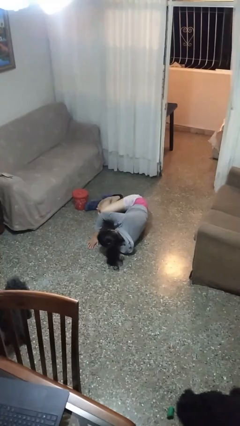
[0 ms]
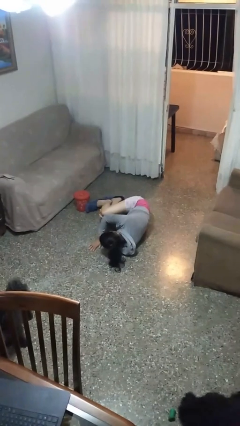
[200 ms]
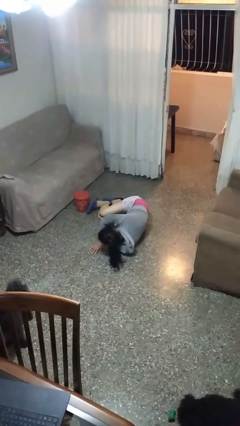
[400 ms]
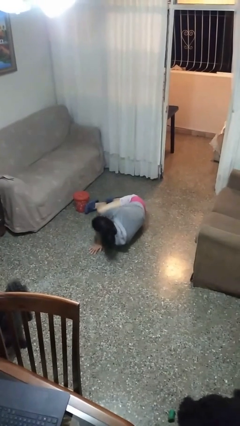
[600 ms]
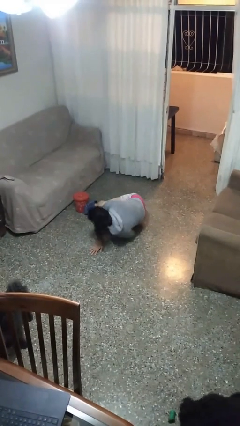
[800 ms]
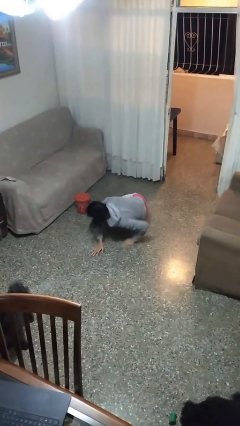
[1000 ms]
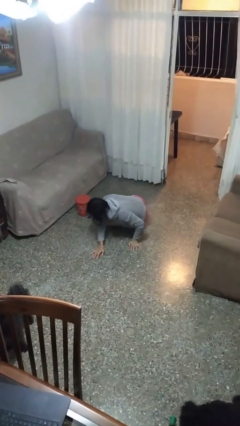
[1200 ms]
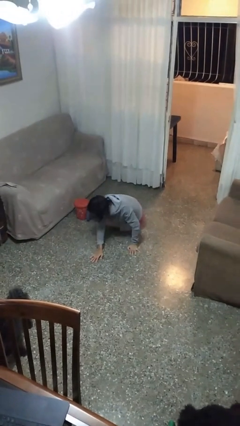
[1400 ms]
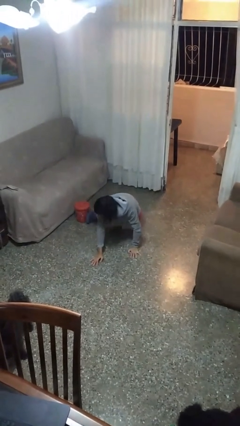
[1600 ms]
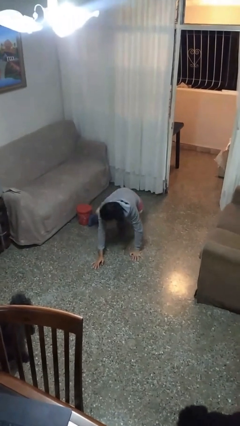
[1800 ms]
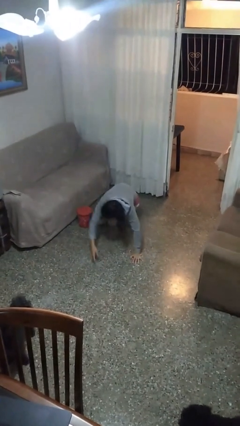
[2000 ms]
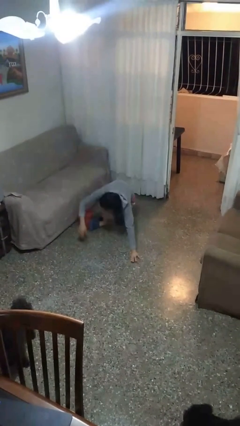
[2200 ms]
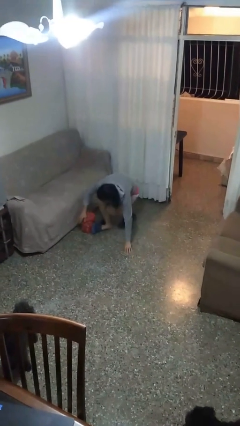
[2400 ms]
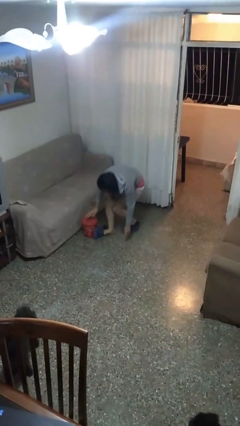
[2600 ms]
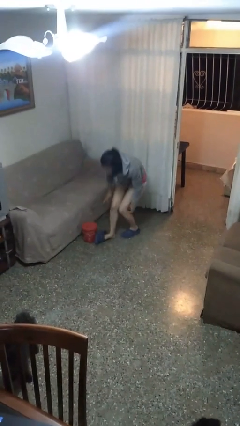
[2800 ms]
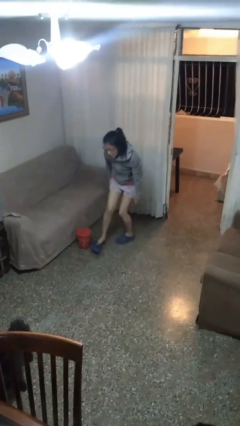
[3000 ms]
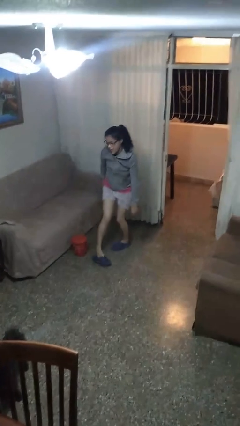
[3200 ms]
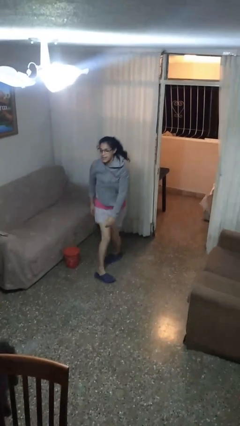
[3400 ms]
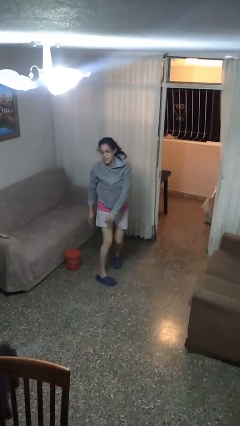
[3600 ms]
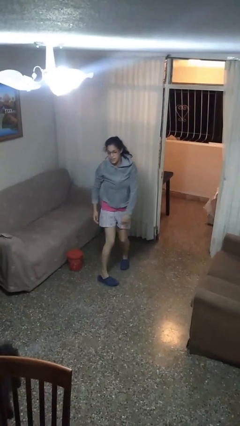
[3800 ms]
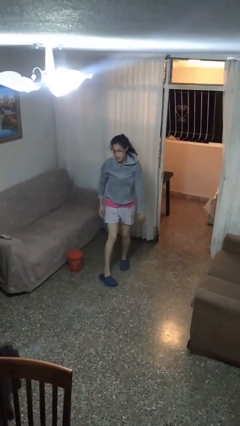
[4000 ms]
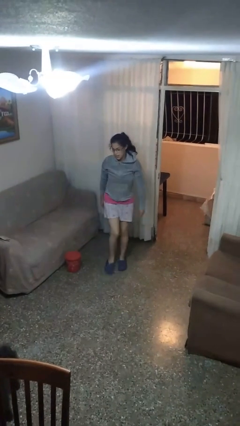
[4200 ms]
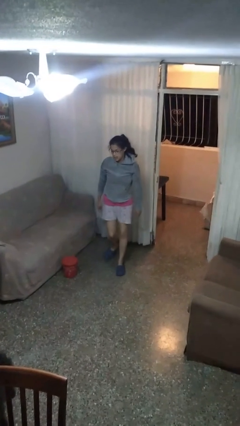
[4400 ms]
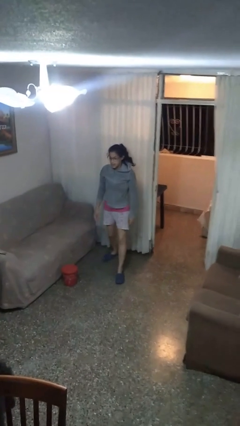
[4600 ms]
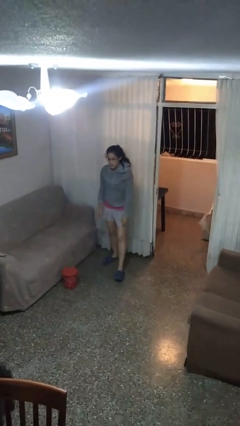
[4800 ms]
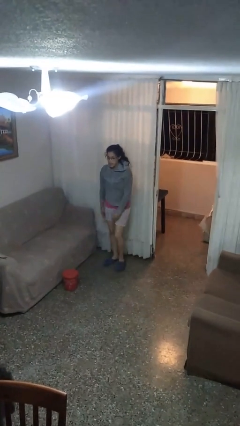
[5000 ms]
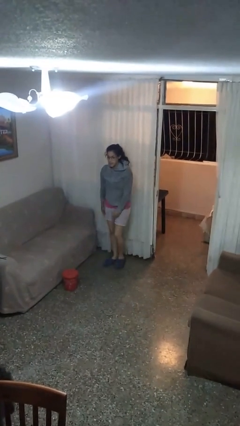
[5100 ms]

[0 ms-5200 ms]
person stands up from floor

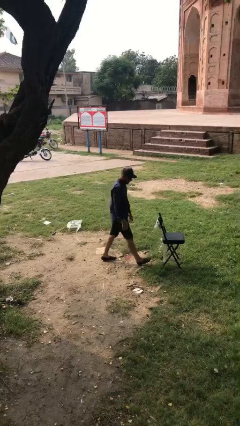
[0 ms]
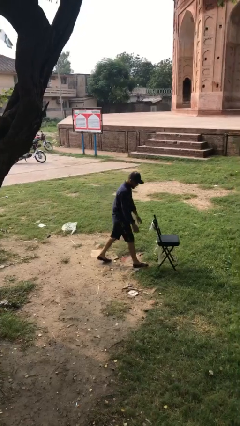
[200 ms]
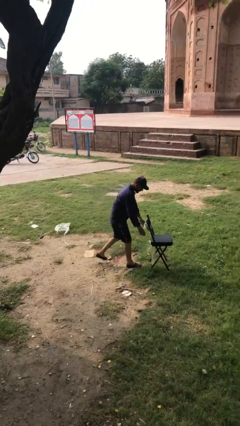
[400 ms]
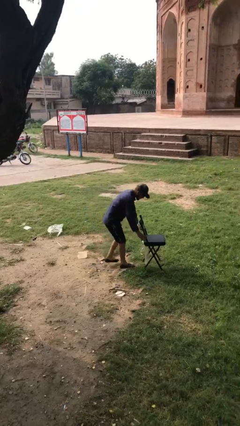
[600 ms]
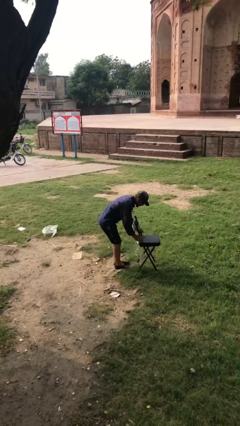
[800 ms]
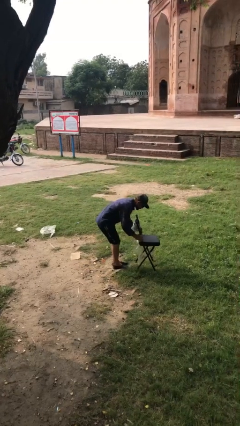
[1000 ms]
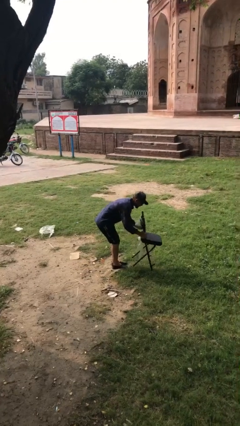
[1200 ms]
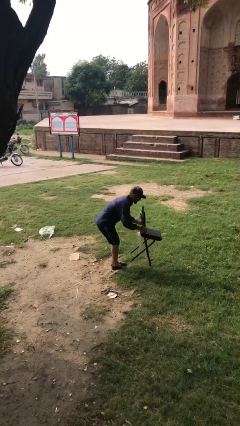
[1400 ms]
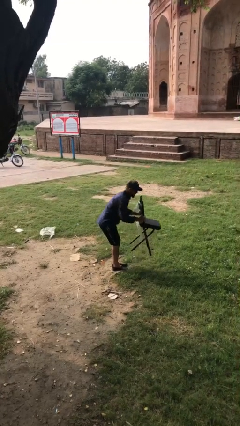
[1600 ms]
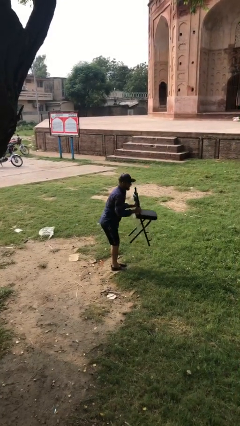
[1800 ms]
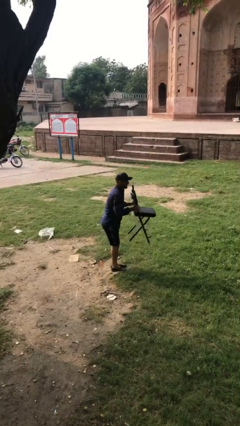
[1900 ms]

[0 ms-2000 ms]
person picks up object from floor

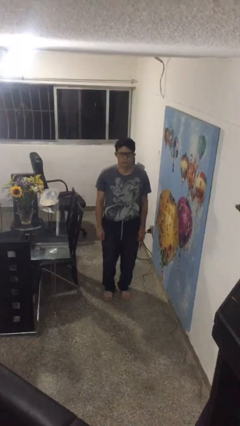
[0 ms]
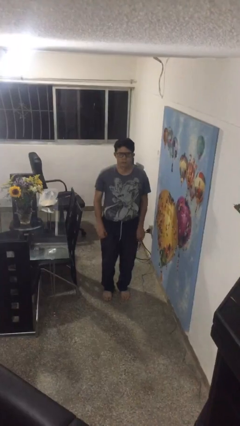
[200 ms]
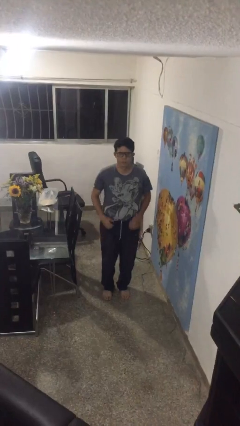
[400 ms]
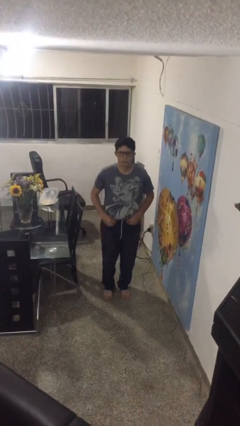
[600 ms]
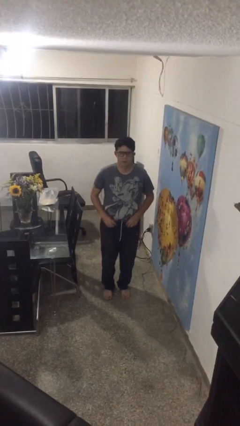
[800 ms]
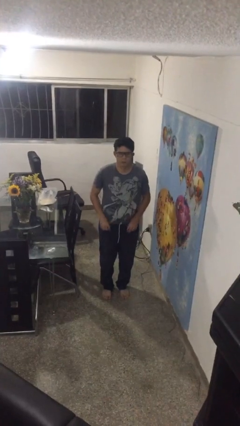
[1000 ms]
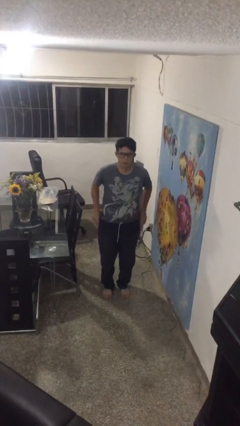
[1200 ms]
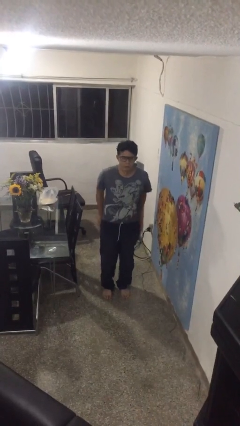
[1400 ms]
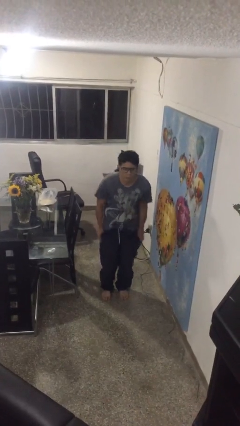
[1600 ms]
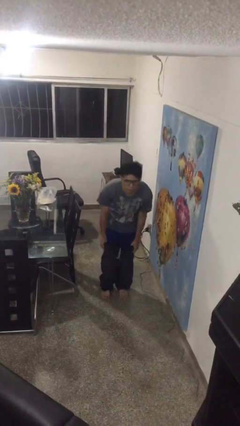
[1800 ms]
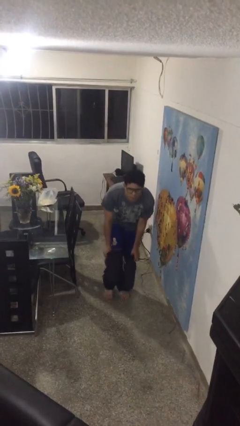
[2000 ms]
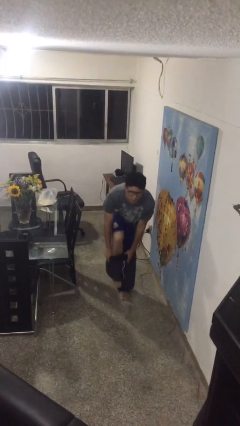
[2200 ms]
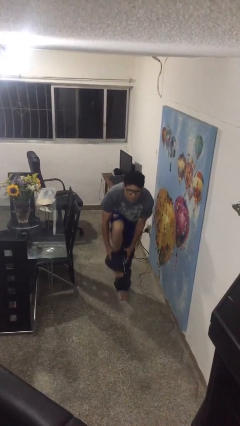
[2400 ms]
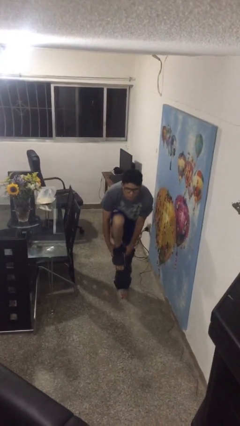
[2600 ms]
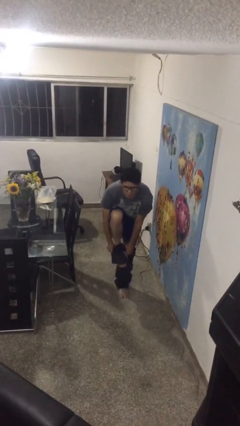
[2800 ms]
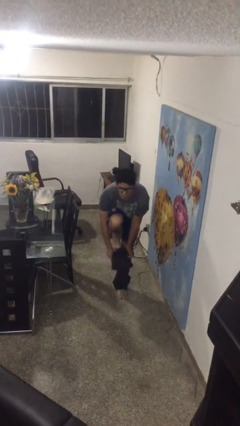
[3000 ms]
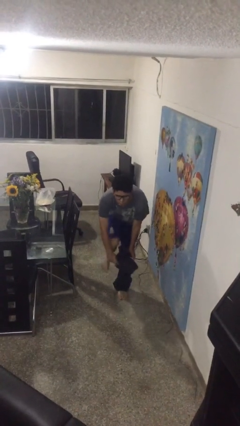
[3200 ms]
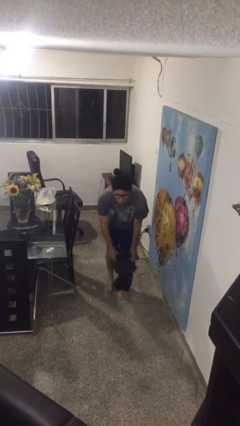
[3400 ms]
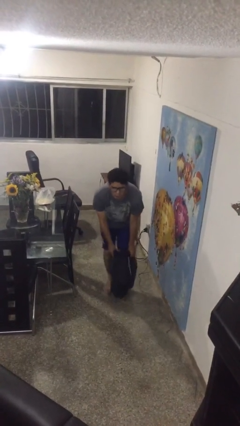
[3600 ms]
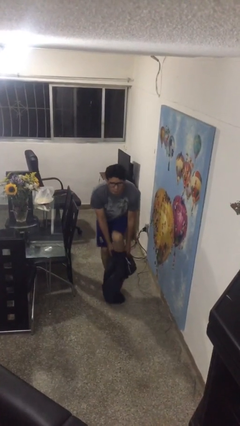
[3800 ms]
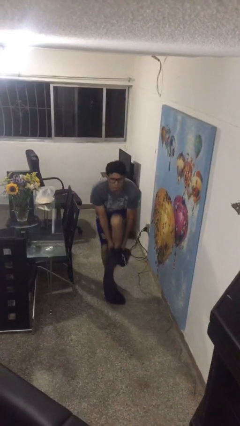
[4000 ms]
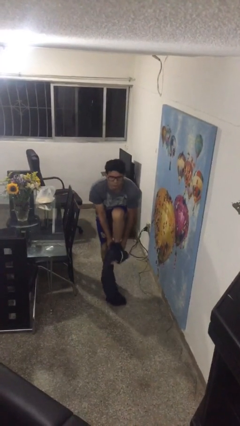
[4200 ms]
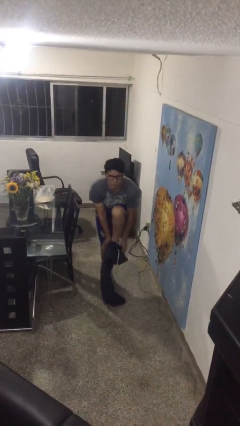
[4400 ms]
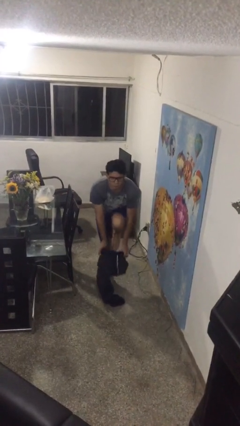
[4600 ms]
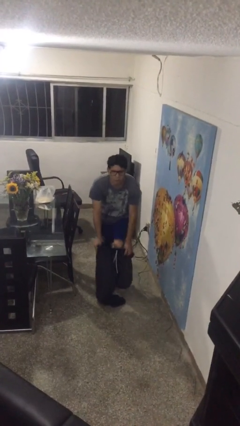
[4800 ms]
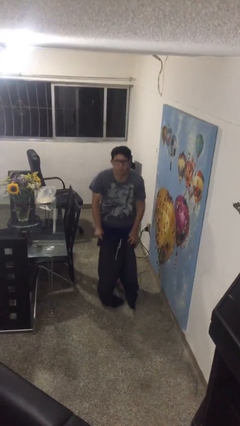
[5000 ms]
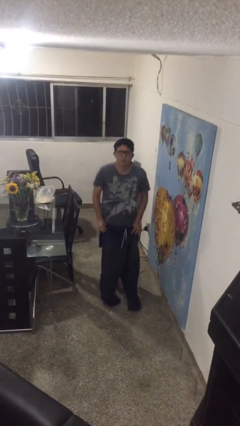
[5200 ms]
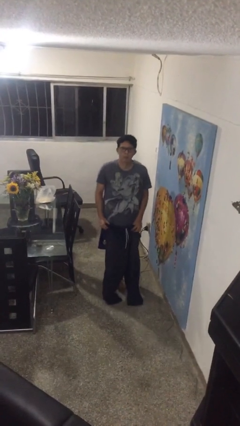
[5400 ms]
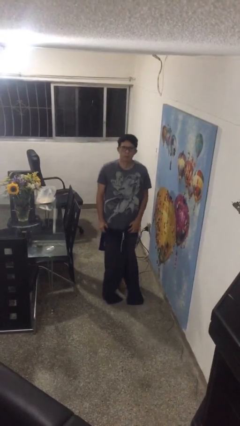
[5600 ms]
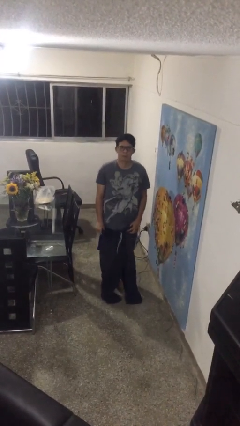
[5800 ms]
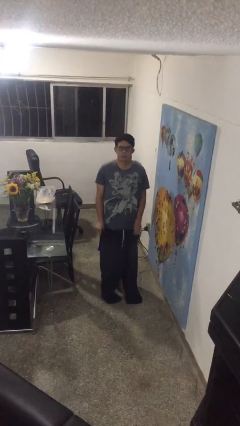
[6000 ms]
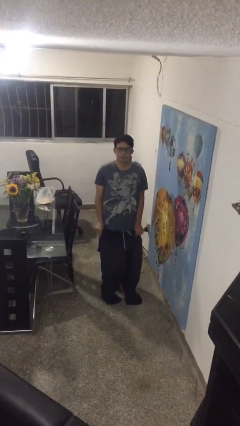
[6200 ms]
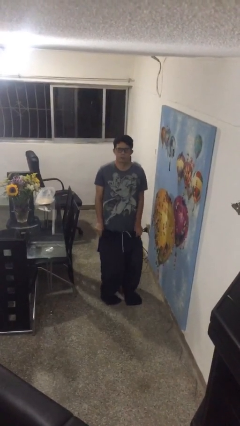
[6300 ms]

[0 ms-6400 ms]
person takes off pants

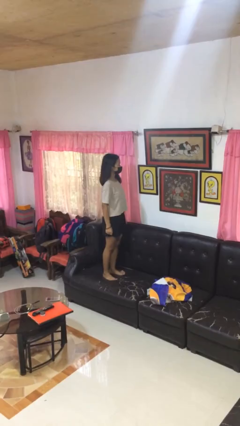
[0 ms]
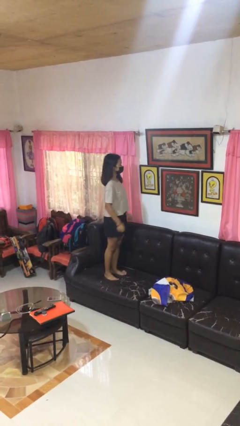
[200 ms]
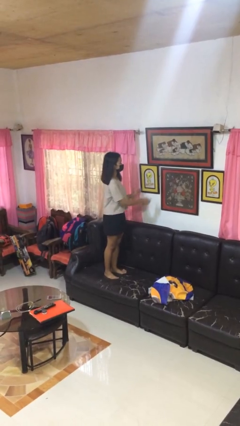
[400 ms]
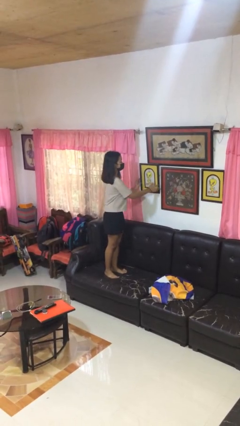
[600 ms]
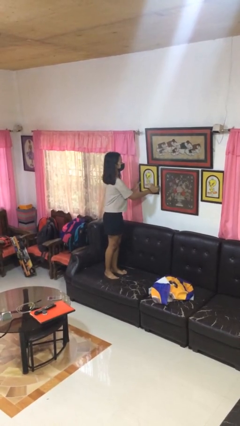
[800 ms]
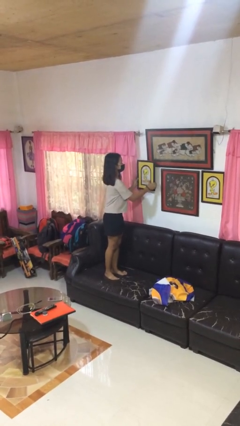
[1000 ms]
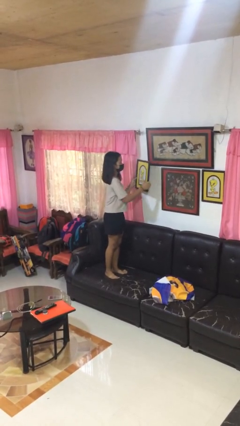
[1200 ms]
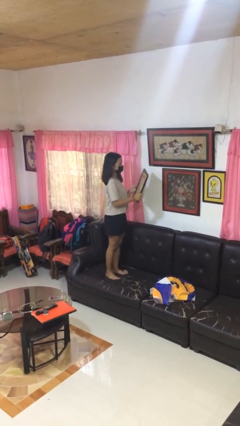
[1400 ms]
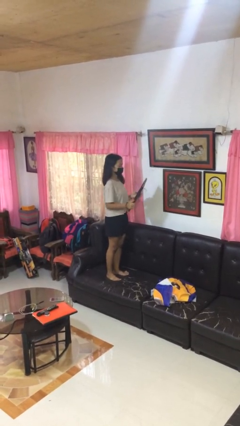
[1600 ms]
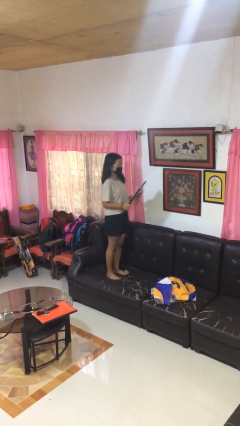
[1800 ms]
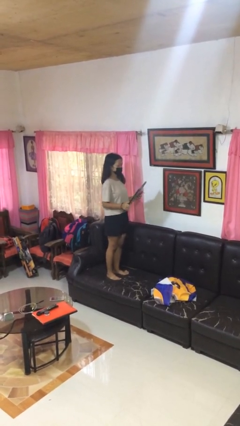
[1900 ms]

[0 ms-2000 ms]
person takes down picture frame

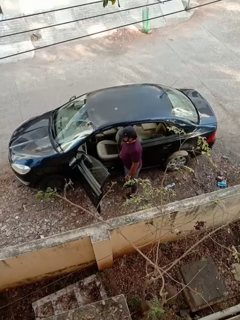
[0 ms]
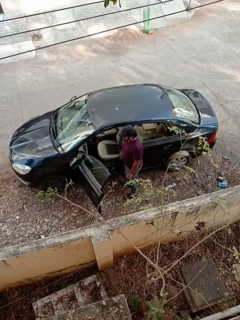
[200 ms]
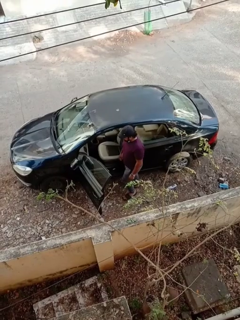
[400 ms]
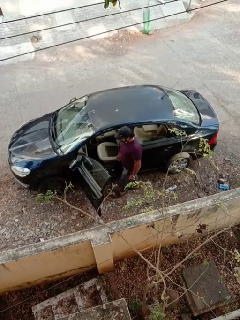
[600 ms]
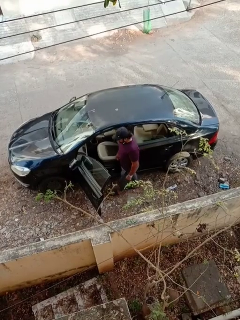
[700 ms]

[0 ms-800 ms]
person enters car

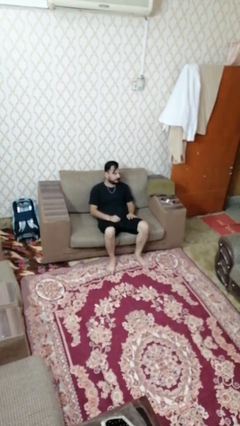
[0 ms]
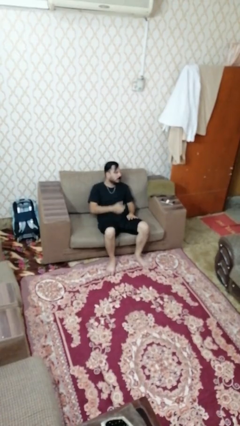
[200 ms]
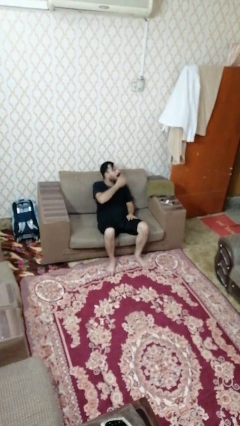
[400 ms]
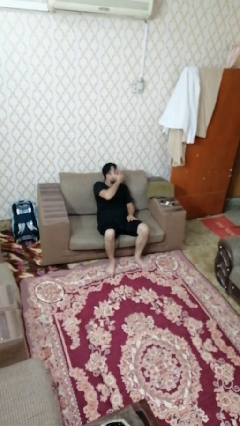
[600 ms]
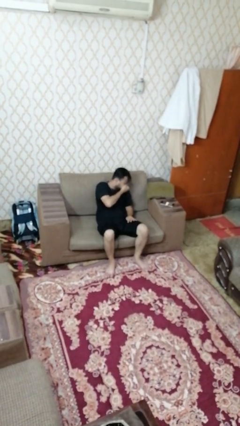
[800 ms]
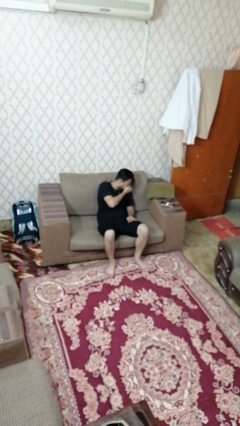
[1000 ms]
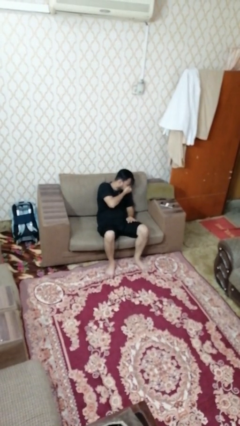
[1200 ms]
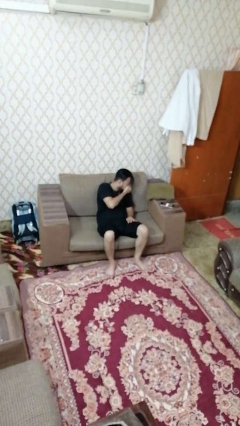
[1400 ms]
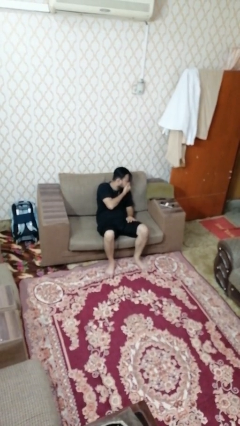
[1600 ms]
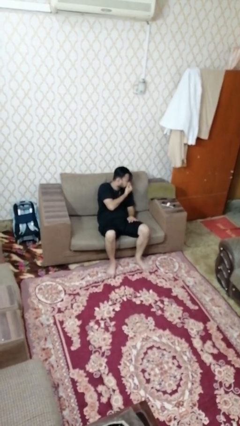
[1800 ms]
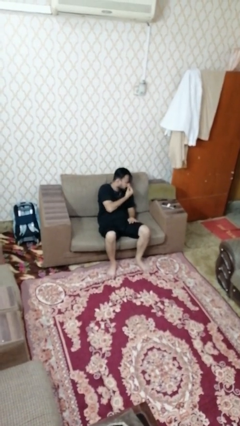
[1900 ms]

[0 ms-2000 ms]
person sneezes into hand
